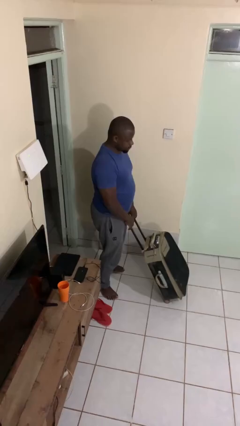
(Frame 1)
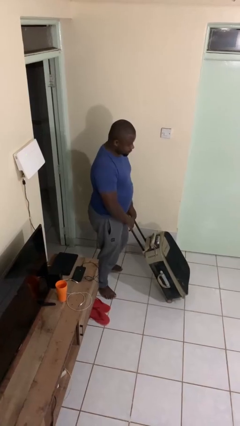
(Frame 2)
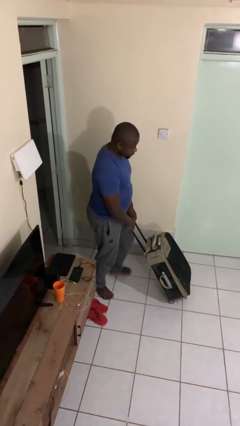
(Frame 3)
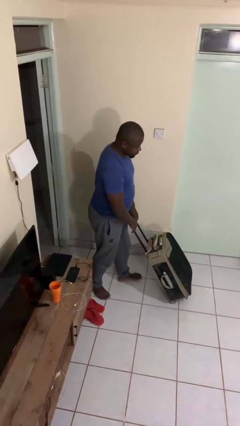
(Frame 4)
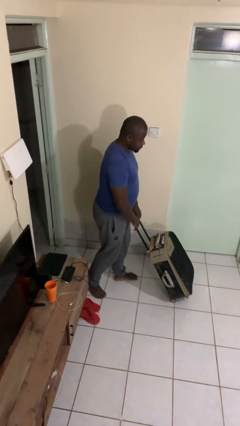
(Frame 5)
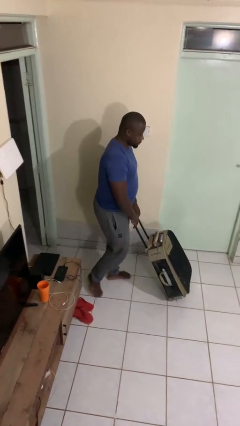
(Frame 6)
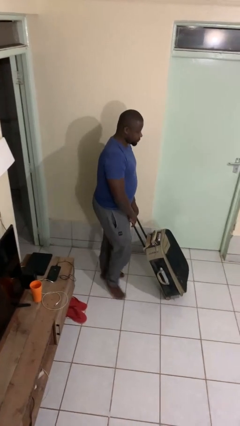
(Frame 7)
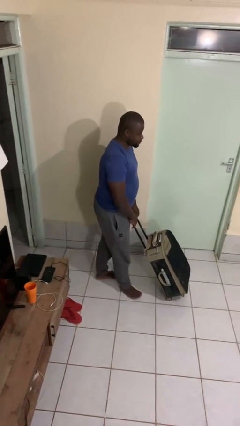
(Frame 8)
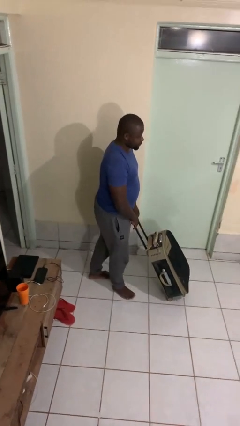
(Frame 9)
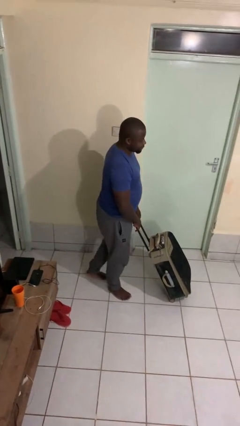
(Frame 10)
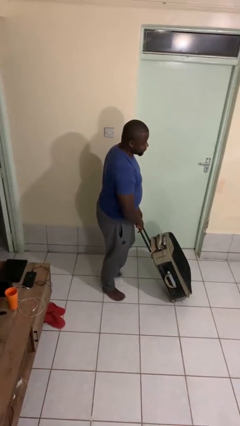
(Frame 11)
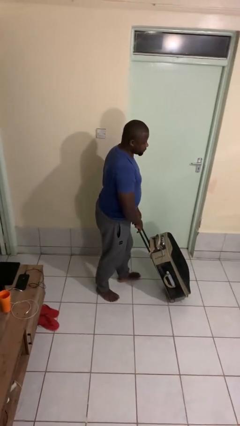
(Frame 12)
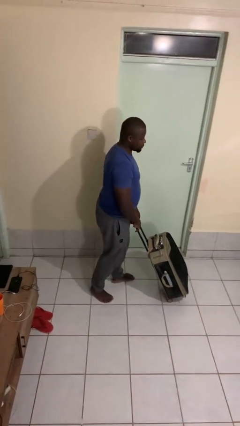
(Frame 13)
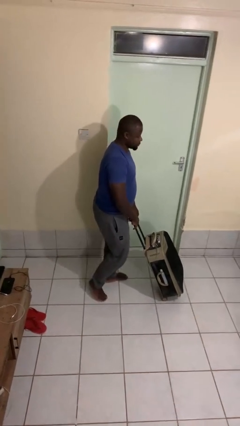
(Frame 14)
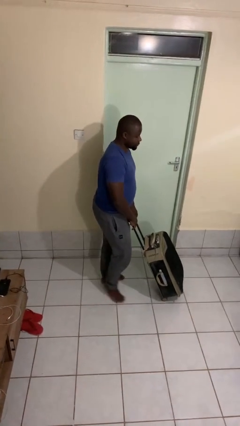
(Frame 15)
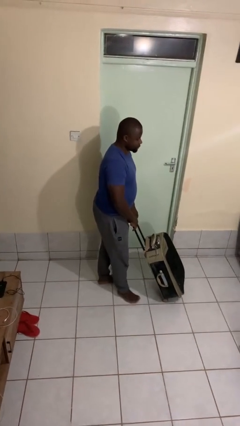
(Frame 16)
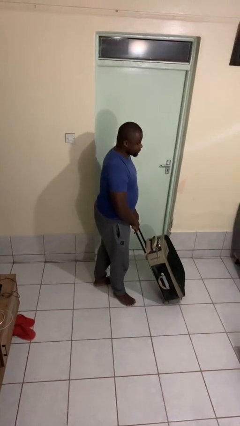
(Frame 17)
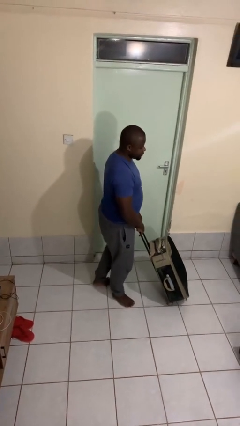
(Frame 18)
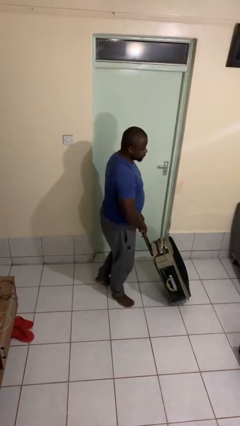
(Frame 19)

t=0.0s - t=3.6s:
person pushes wheeled cart

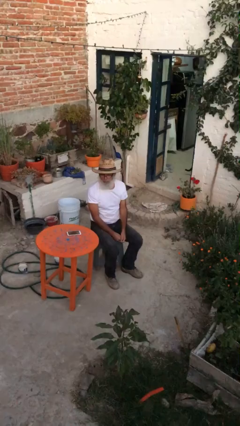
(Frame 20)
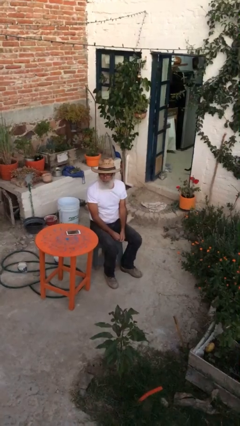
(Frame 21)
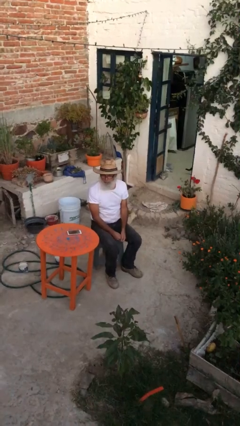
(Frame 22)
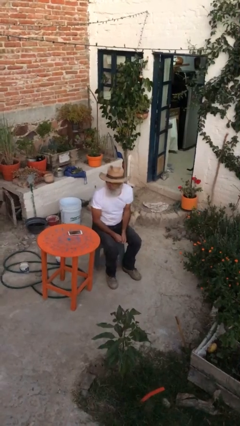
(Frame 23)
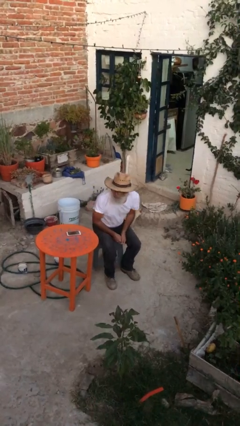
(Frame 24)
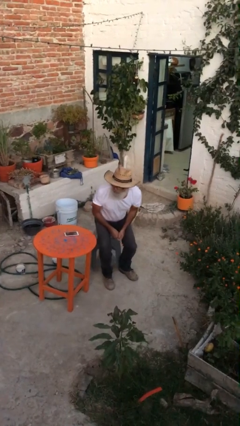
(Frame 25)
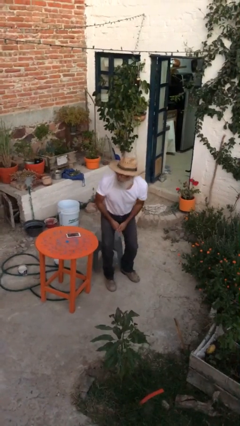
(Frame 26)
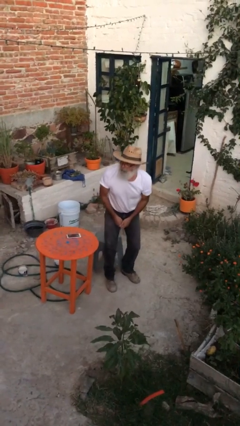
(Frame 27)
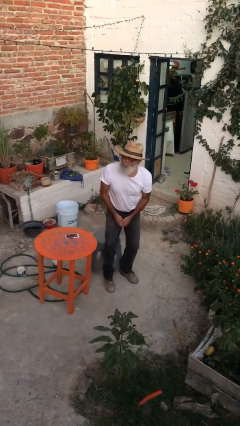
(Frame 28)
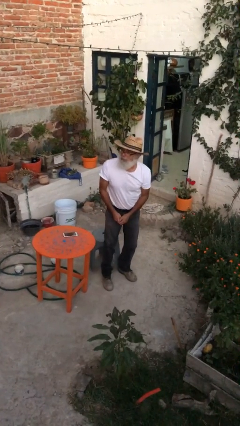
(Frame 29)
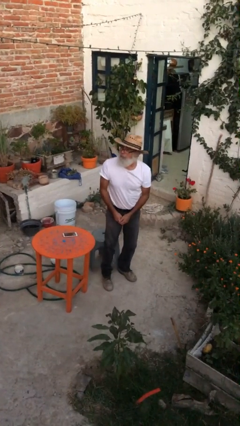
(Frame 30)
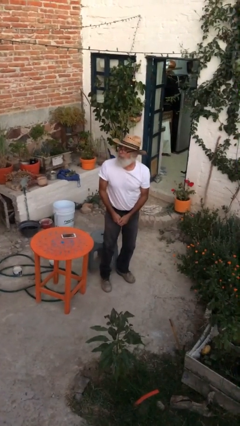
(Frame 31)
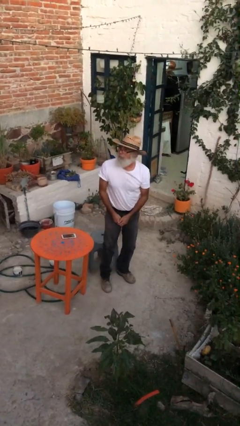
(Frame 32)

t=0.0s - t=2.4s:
person stands up

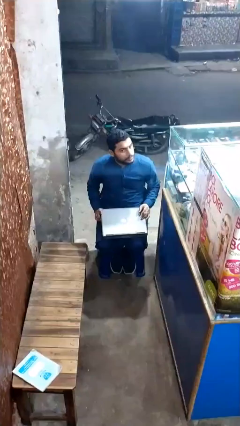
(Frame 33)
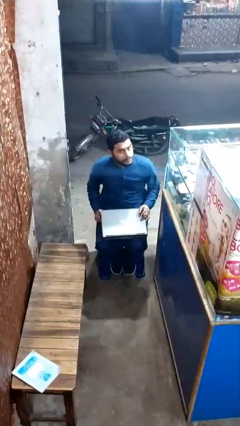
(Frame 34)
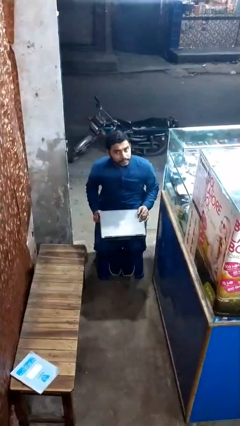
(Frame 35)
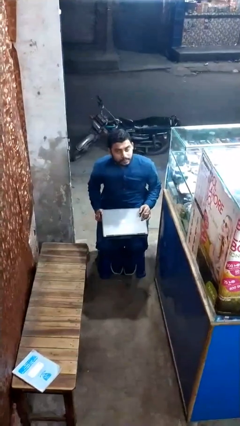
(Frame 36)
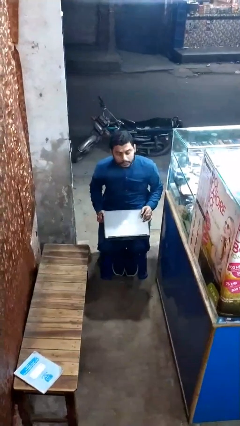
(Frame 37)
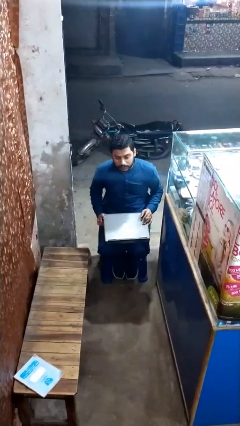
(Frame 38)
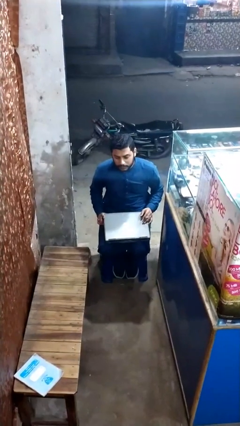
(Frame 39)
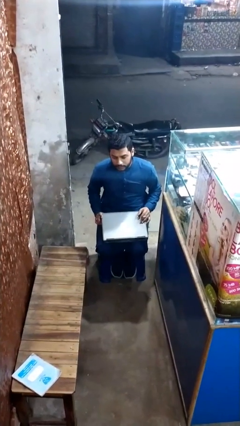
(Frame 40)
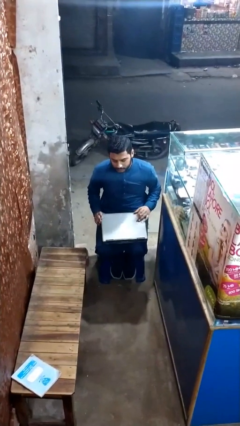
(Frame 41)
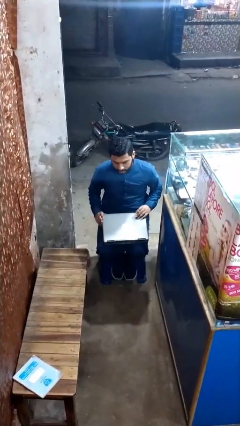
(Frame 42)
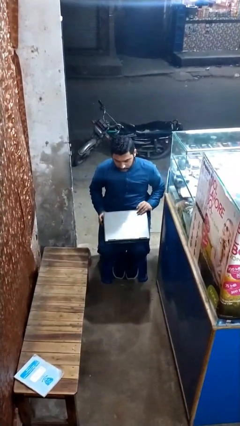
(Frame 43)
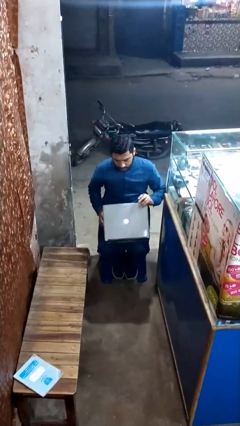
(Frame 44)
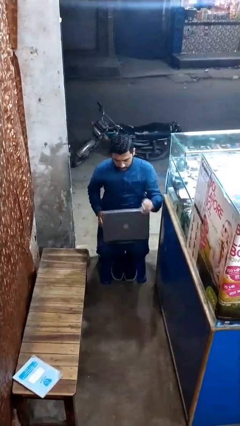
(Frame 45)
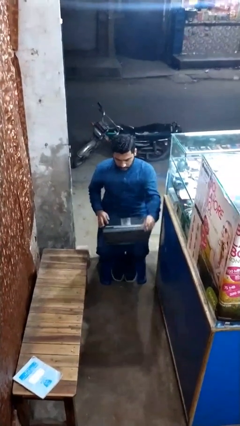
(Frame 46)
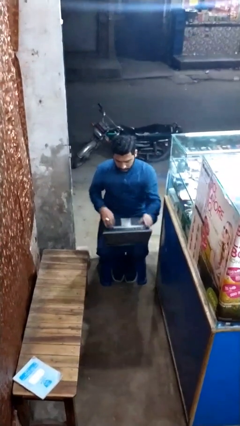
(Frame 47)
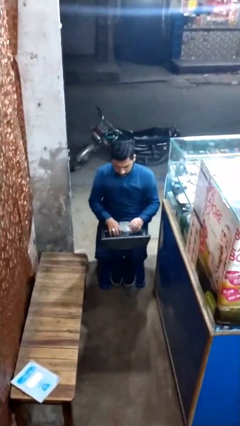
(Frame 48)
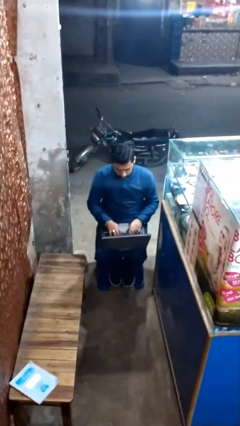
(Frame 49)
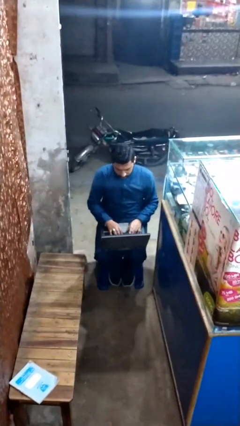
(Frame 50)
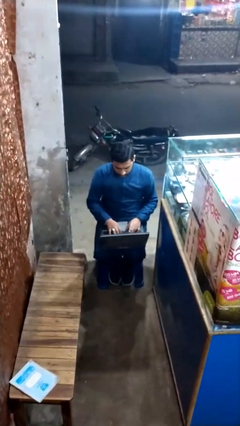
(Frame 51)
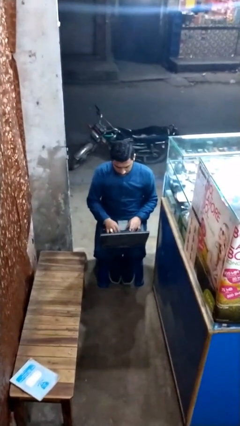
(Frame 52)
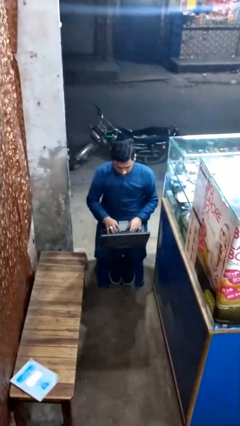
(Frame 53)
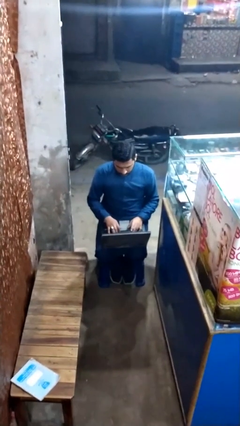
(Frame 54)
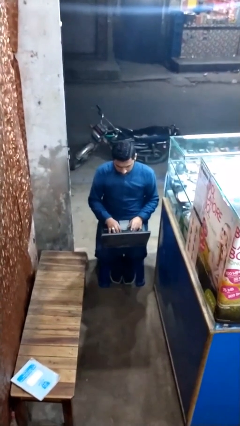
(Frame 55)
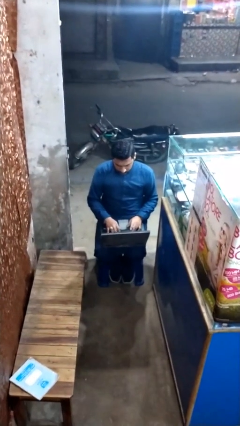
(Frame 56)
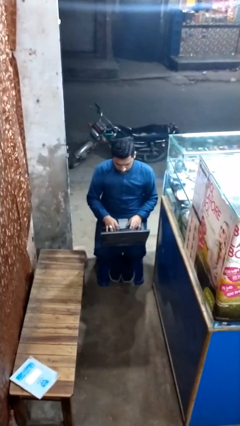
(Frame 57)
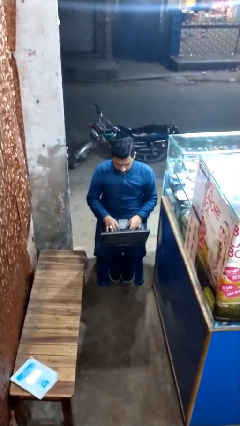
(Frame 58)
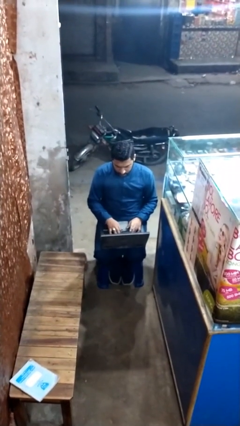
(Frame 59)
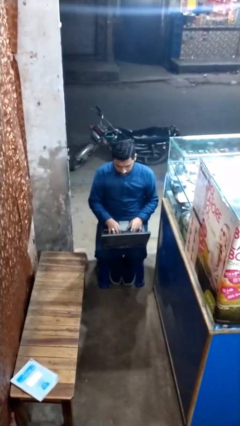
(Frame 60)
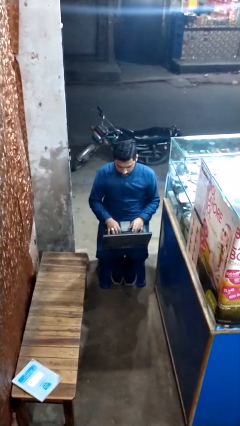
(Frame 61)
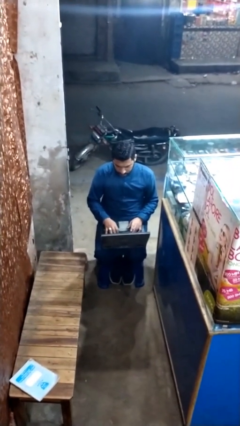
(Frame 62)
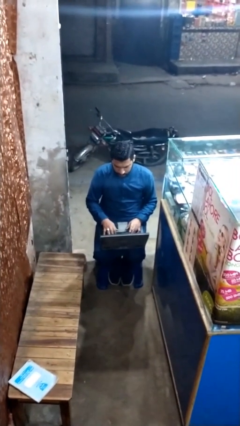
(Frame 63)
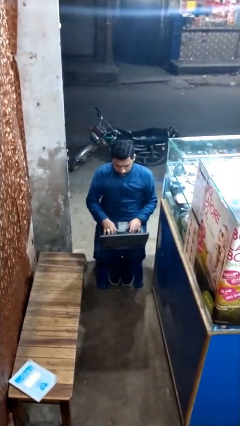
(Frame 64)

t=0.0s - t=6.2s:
person interacts with laptop

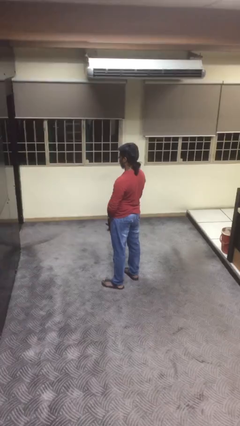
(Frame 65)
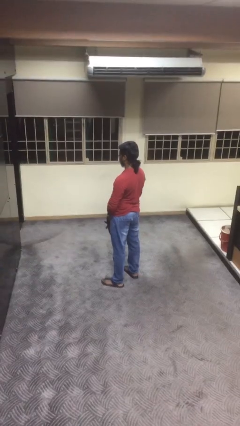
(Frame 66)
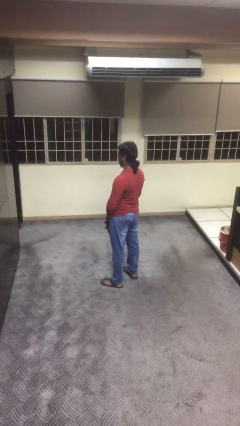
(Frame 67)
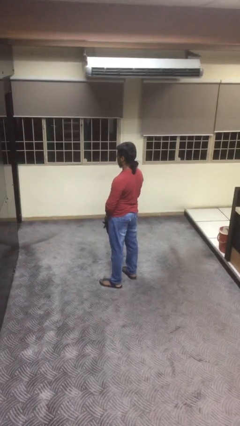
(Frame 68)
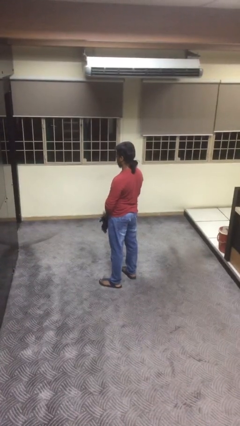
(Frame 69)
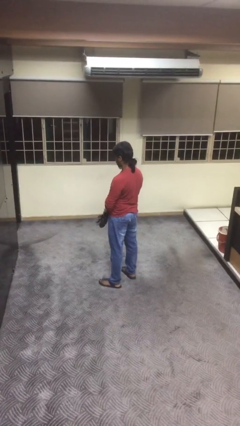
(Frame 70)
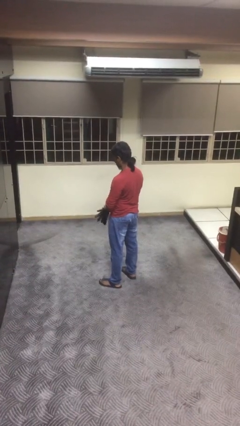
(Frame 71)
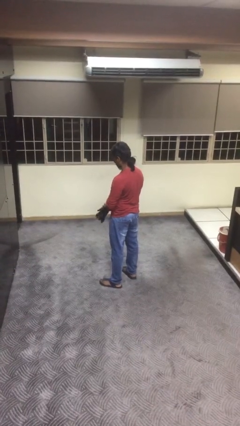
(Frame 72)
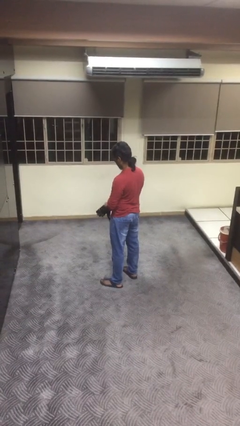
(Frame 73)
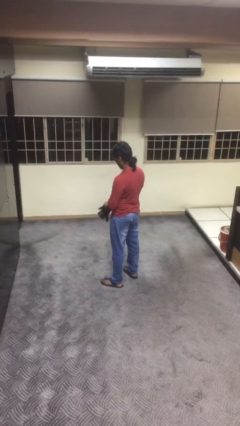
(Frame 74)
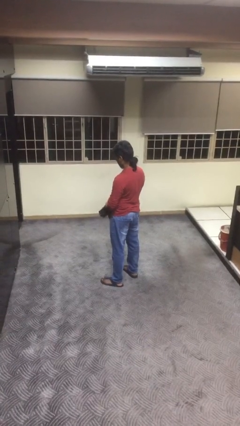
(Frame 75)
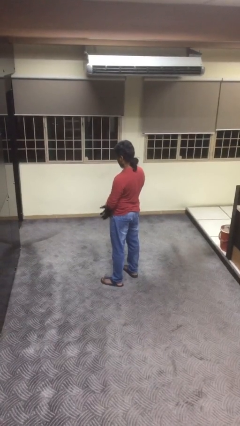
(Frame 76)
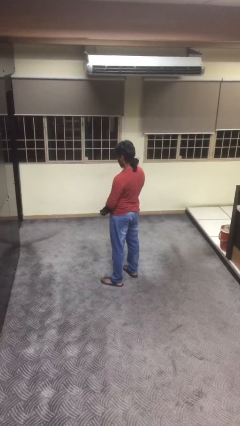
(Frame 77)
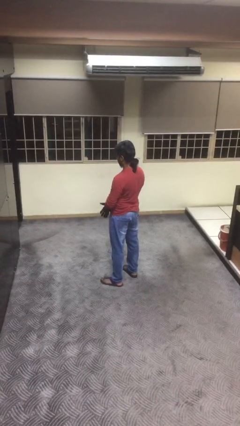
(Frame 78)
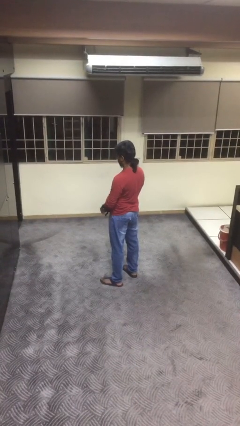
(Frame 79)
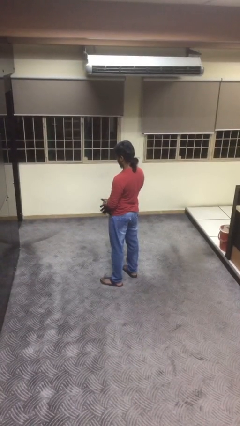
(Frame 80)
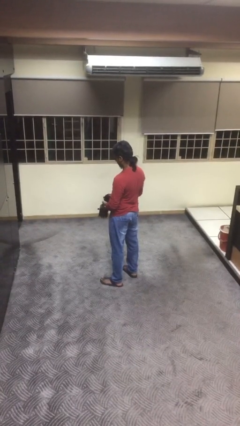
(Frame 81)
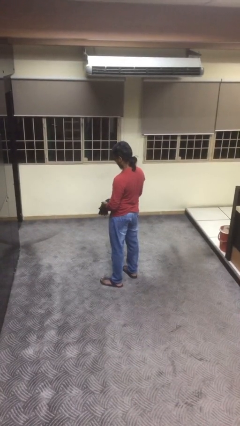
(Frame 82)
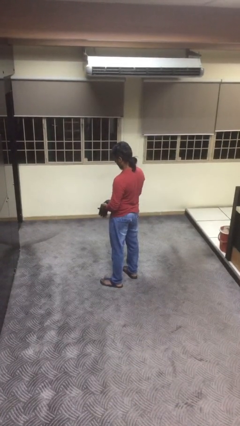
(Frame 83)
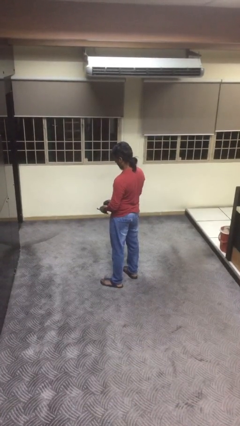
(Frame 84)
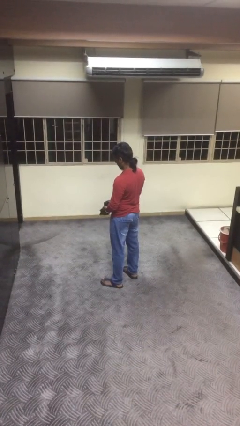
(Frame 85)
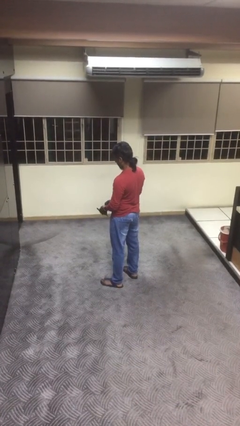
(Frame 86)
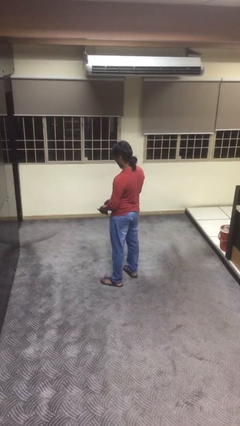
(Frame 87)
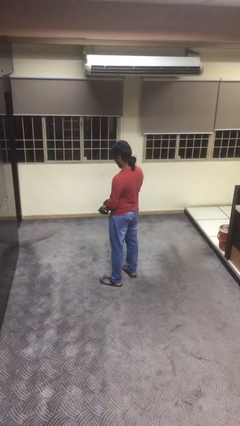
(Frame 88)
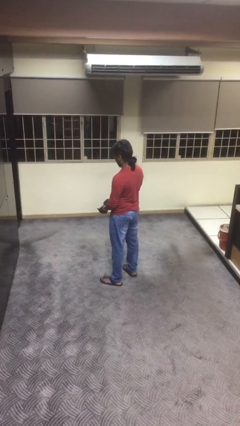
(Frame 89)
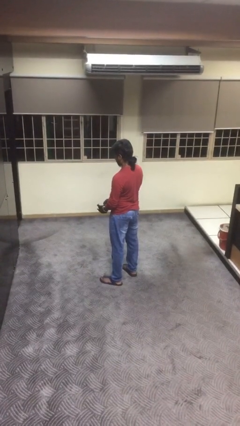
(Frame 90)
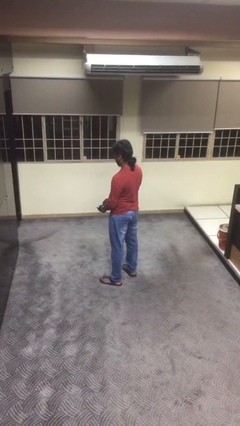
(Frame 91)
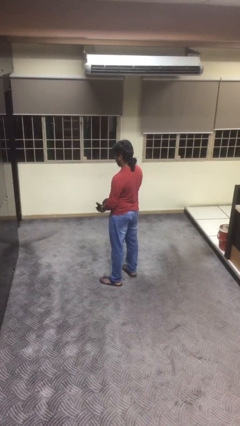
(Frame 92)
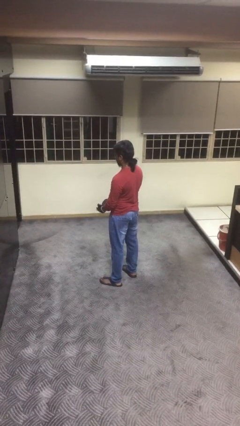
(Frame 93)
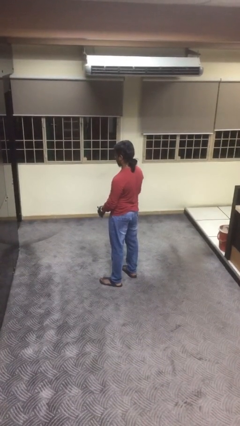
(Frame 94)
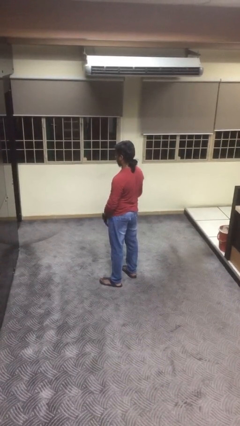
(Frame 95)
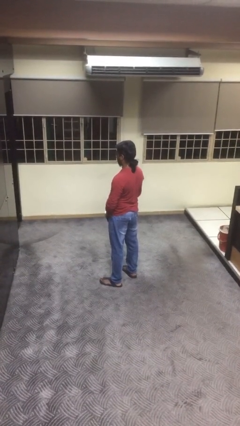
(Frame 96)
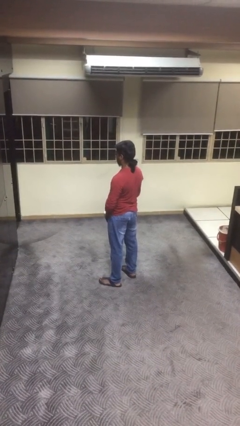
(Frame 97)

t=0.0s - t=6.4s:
person puts on gloves
